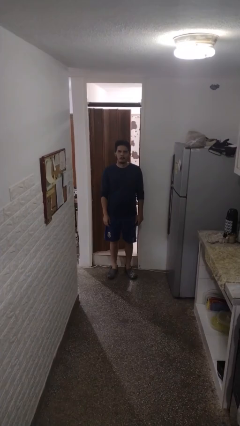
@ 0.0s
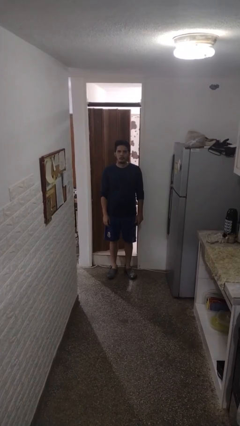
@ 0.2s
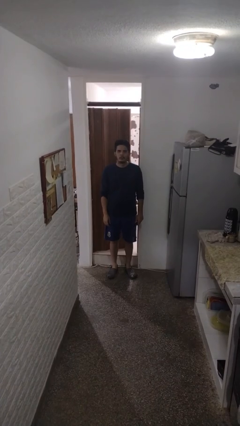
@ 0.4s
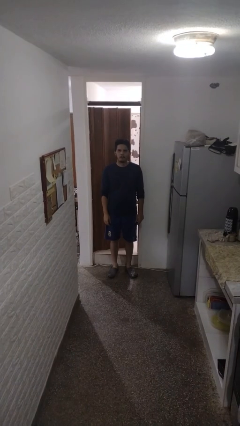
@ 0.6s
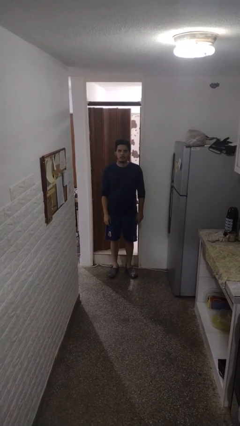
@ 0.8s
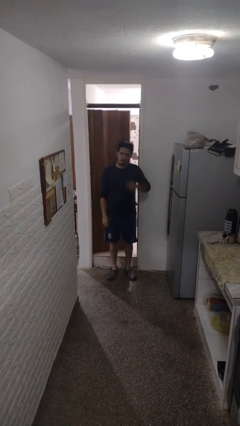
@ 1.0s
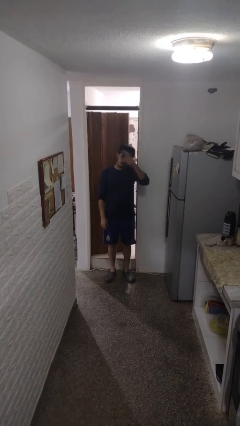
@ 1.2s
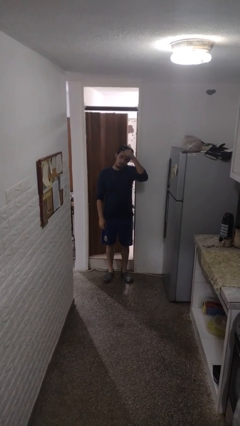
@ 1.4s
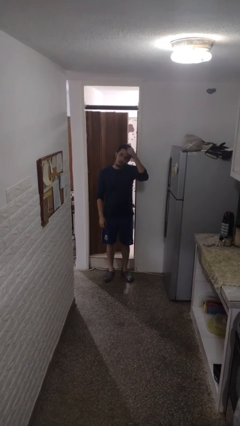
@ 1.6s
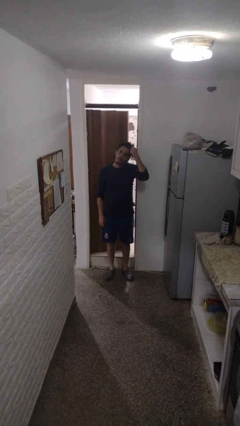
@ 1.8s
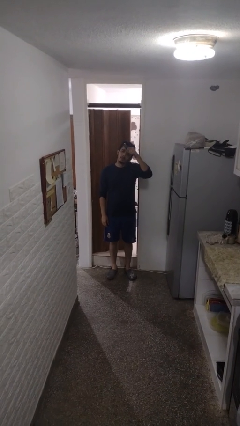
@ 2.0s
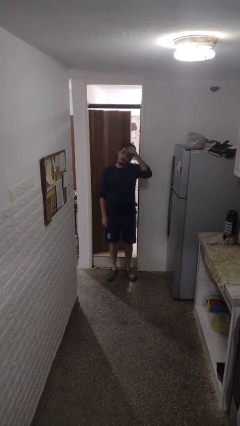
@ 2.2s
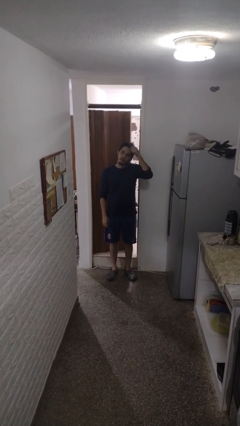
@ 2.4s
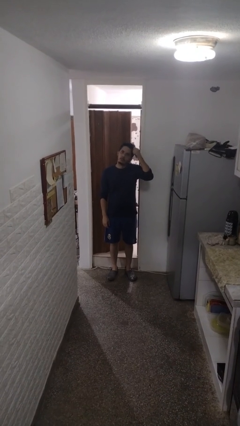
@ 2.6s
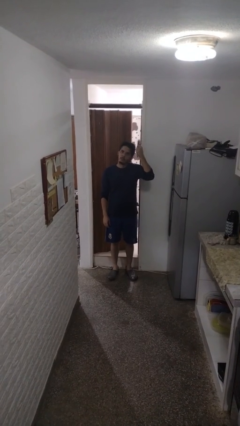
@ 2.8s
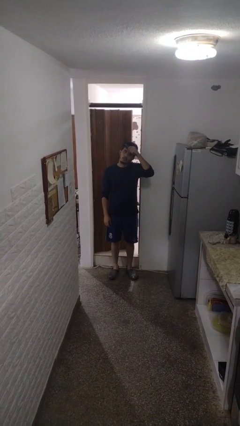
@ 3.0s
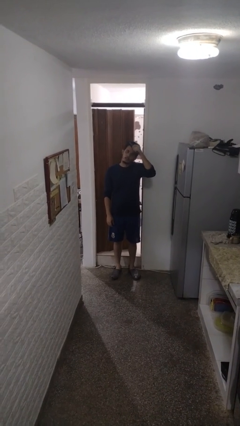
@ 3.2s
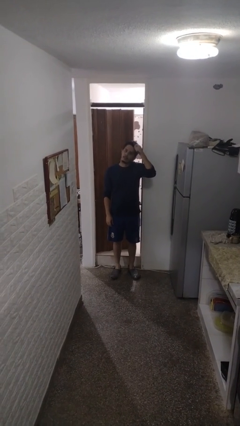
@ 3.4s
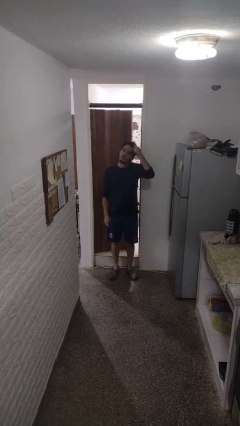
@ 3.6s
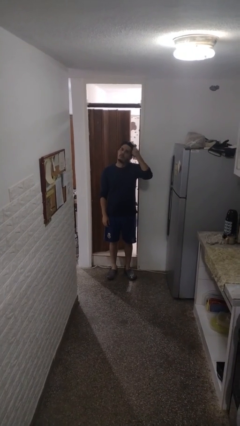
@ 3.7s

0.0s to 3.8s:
person brushes hair

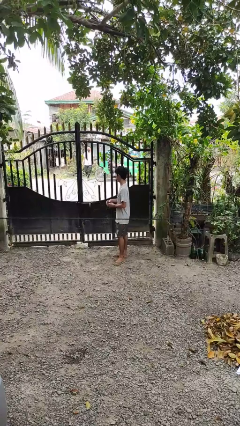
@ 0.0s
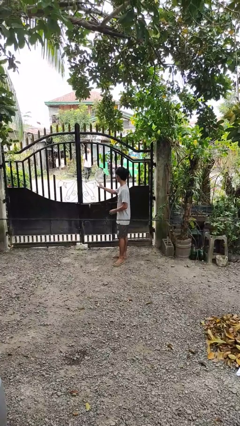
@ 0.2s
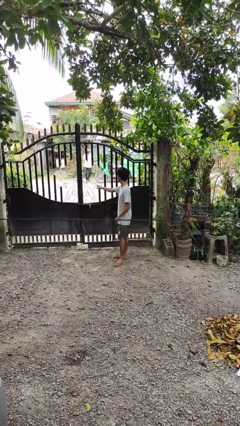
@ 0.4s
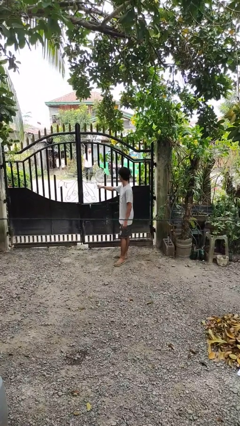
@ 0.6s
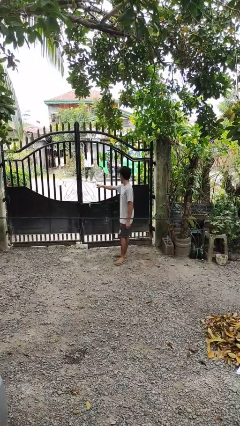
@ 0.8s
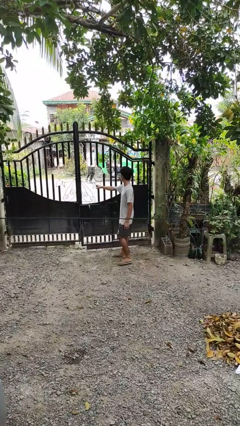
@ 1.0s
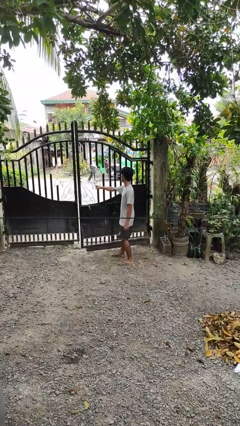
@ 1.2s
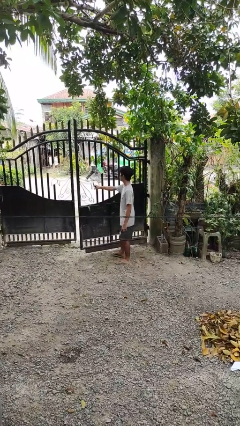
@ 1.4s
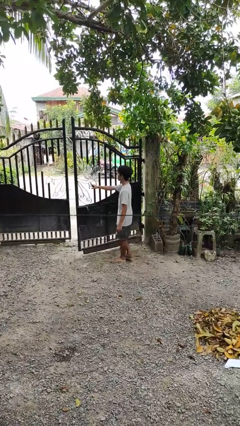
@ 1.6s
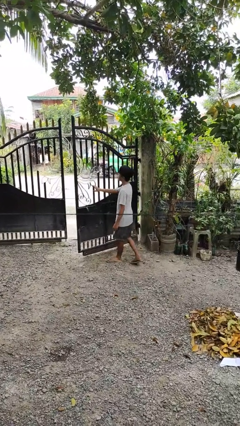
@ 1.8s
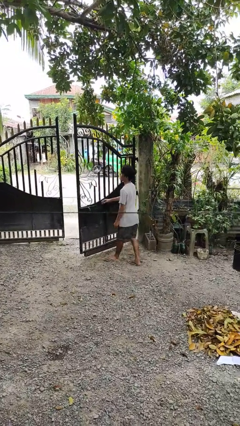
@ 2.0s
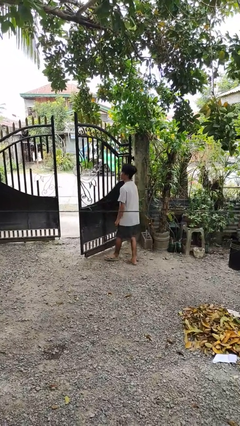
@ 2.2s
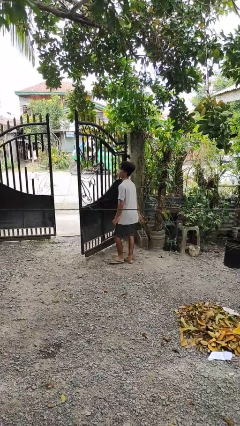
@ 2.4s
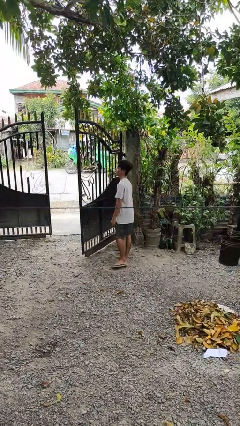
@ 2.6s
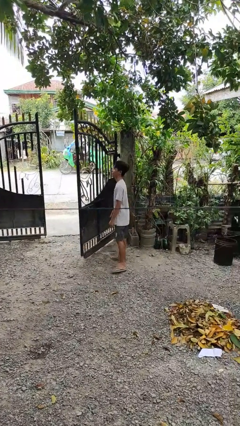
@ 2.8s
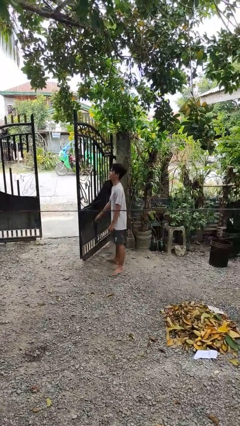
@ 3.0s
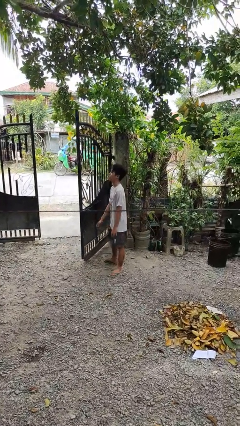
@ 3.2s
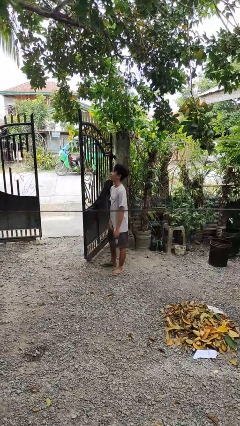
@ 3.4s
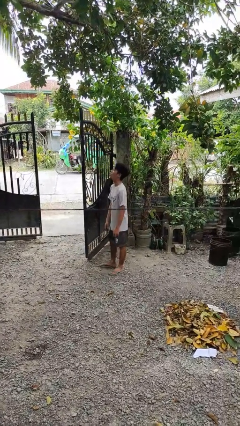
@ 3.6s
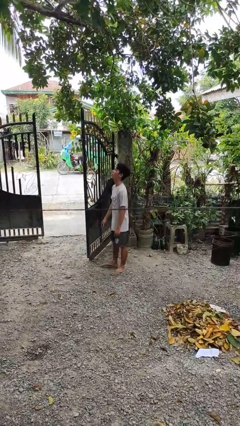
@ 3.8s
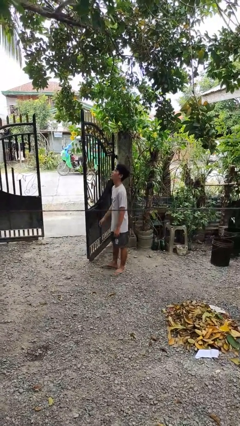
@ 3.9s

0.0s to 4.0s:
person opens gate

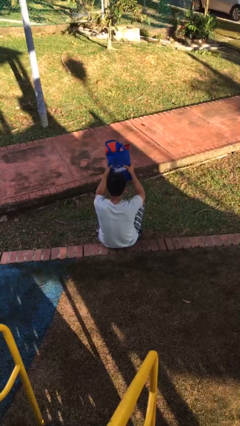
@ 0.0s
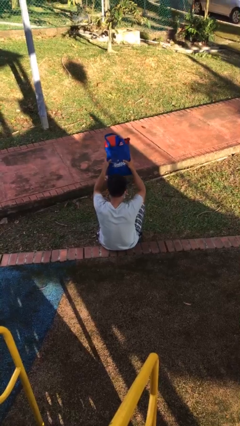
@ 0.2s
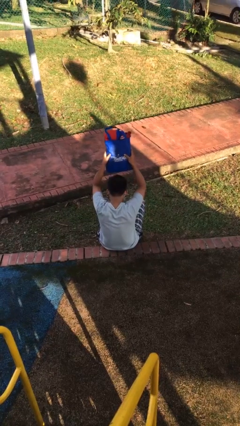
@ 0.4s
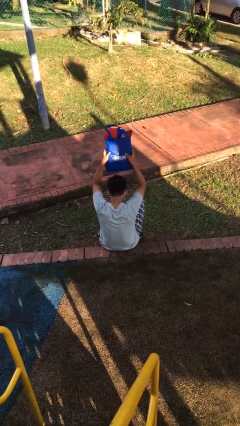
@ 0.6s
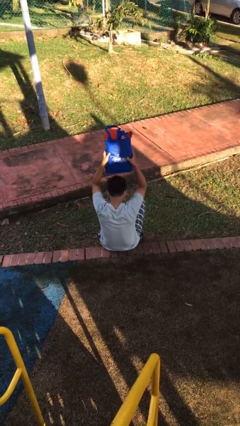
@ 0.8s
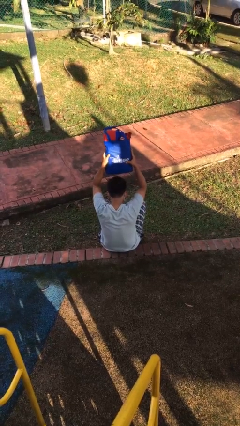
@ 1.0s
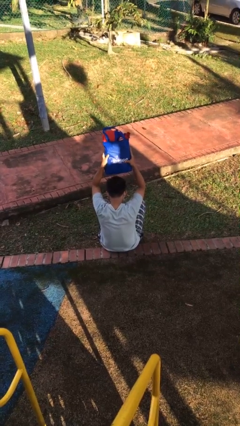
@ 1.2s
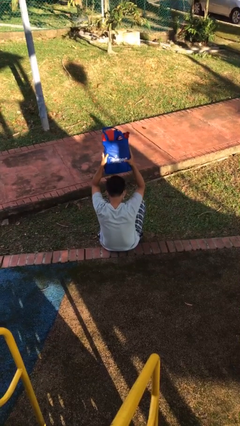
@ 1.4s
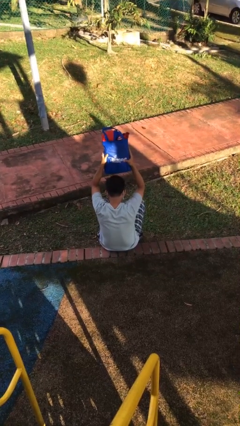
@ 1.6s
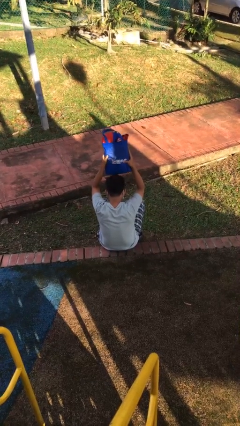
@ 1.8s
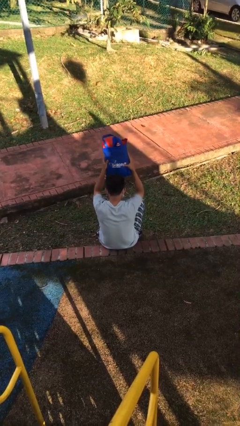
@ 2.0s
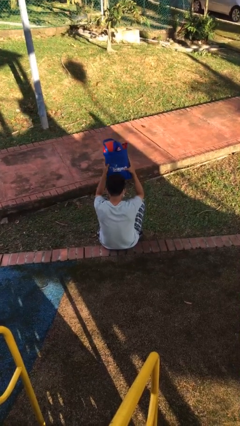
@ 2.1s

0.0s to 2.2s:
person holds object above head

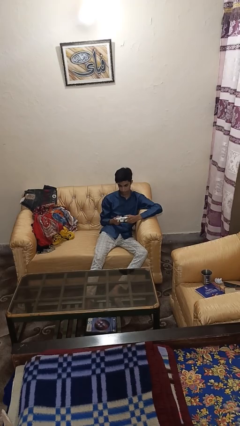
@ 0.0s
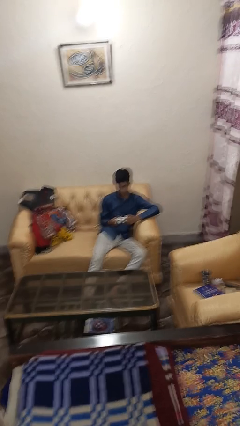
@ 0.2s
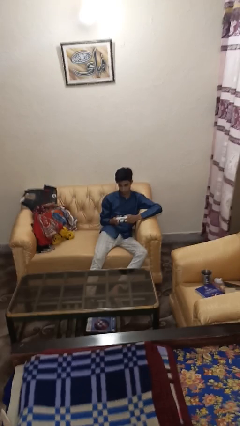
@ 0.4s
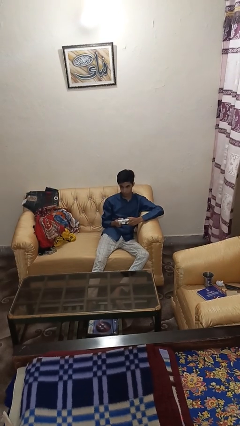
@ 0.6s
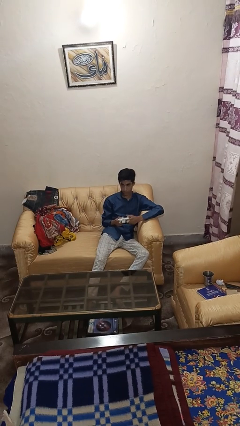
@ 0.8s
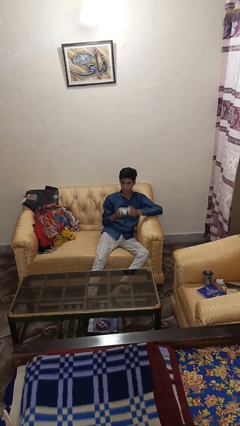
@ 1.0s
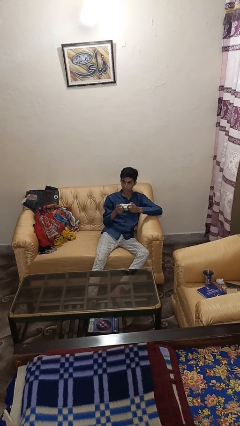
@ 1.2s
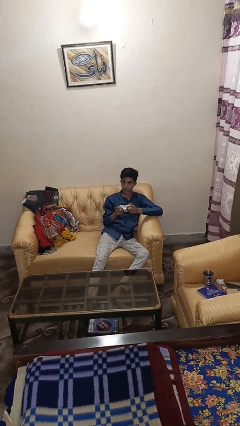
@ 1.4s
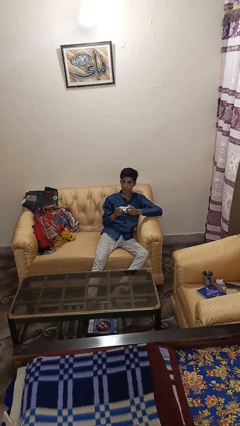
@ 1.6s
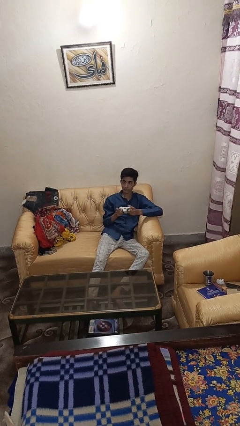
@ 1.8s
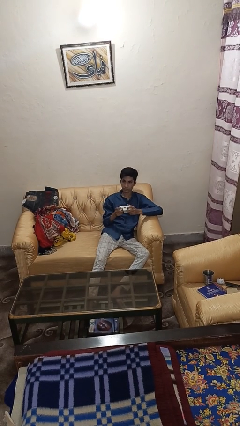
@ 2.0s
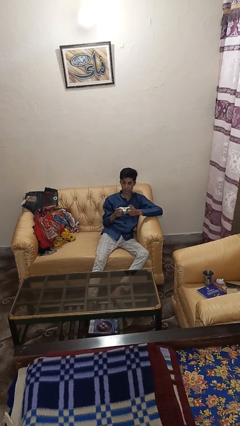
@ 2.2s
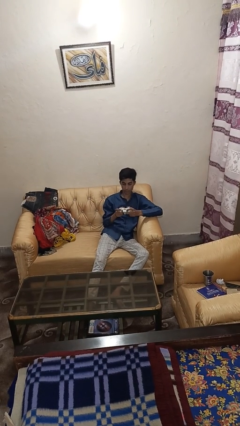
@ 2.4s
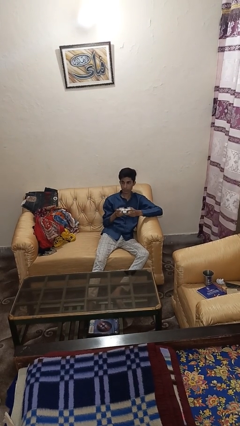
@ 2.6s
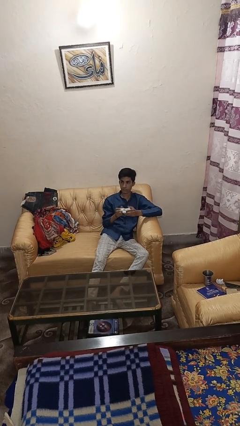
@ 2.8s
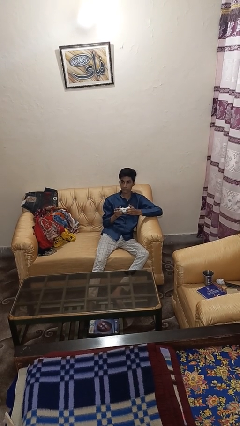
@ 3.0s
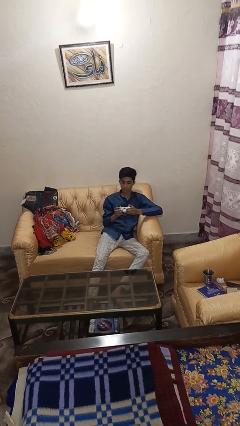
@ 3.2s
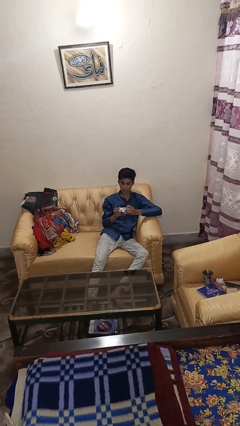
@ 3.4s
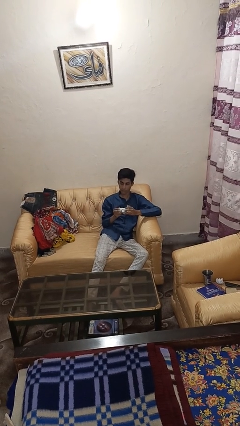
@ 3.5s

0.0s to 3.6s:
person interacts with handheld game

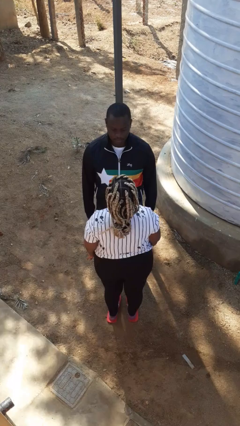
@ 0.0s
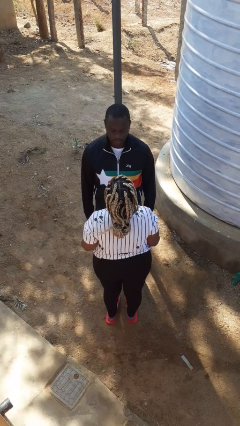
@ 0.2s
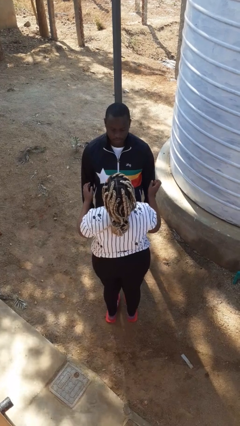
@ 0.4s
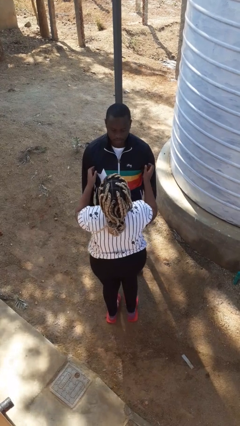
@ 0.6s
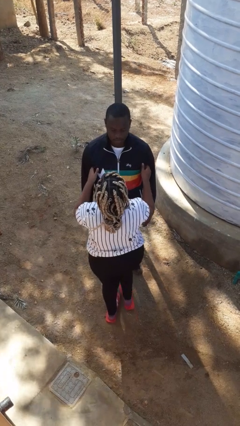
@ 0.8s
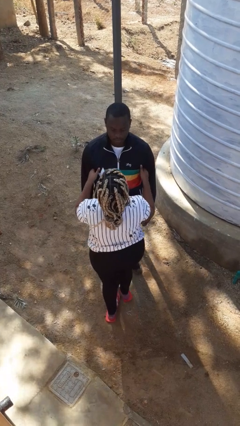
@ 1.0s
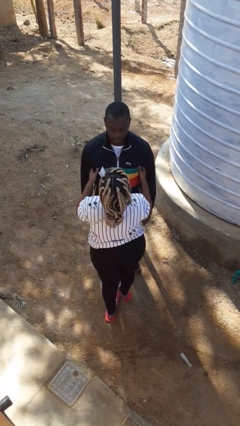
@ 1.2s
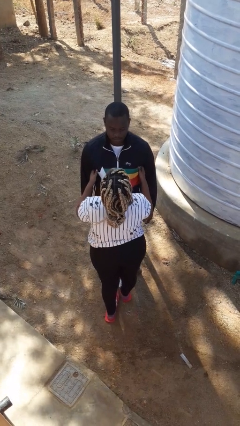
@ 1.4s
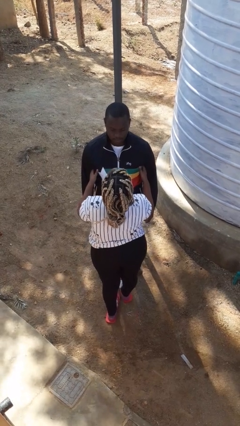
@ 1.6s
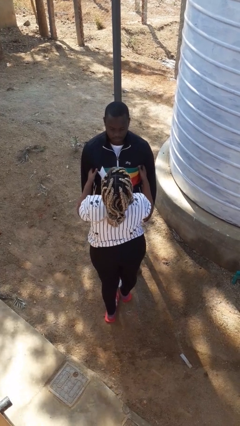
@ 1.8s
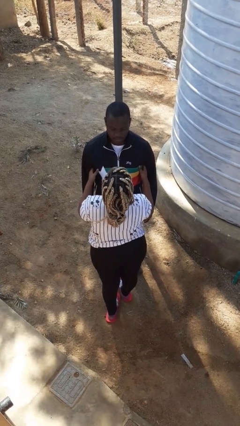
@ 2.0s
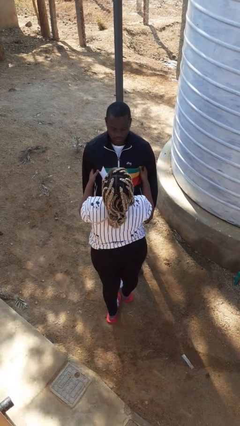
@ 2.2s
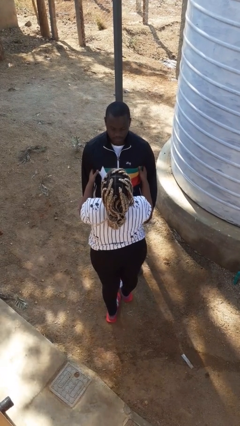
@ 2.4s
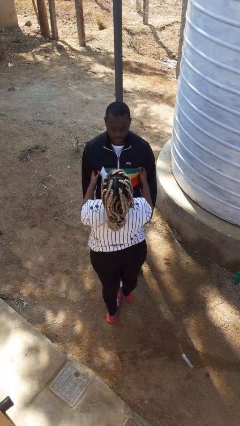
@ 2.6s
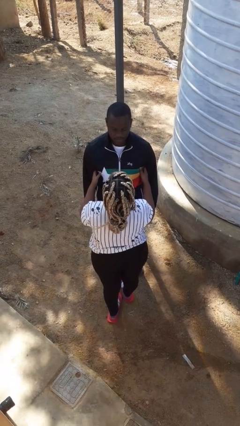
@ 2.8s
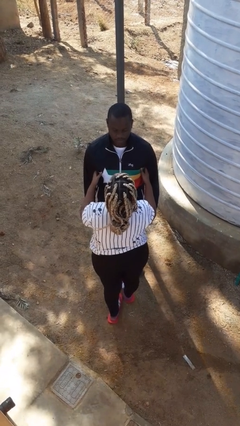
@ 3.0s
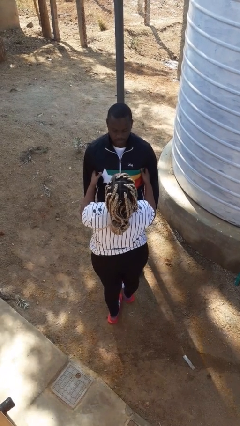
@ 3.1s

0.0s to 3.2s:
person tickles person

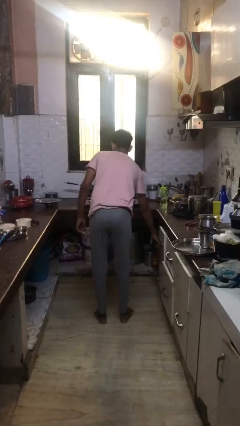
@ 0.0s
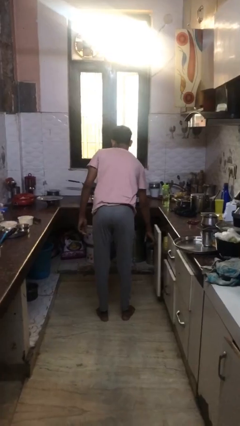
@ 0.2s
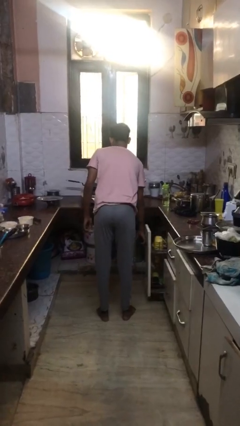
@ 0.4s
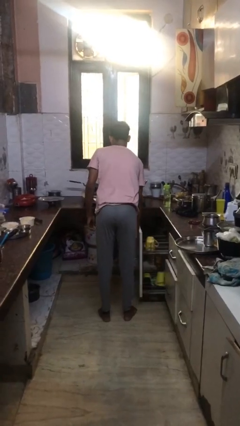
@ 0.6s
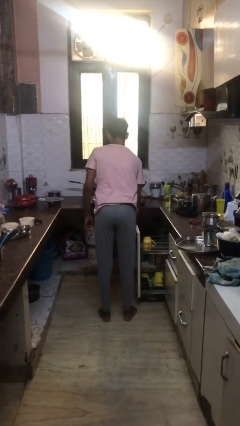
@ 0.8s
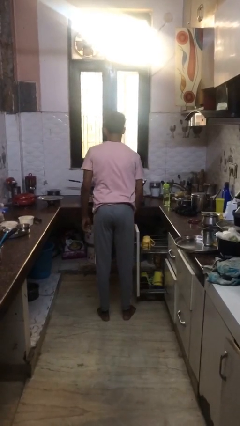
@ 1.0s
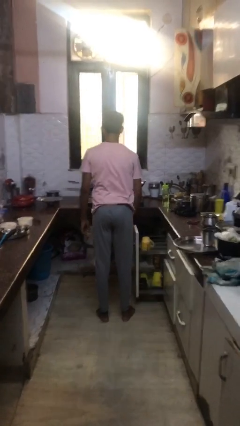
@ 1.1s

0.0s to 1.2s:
person opens dishwasher
